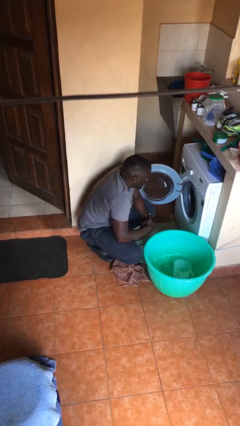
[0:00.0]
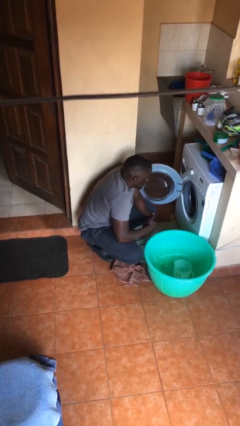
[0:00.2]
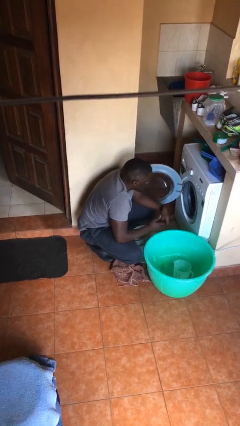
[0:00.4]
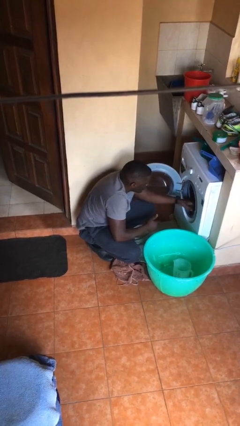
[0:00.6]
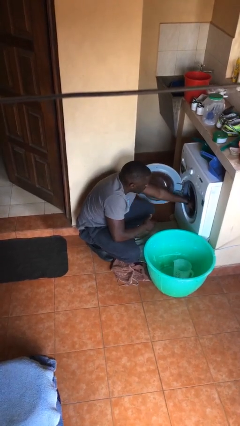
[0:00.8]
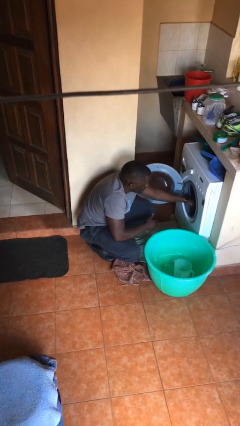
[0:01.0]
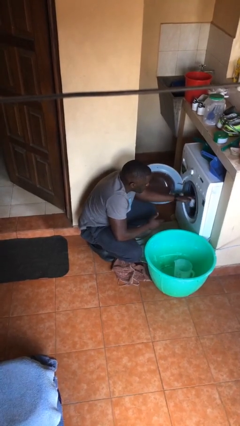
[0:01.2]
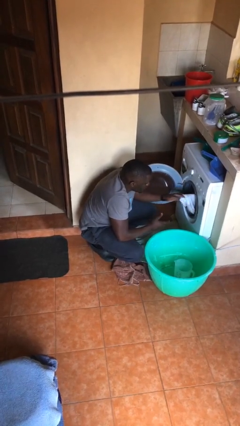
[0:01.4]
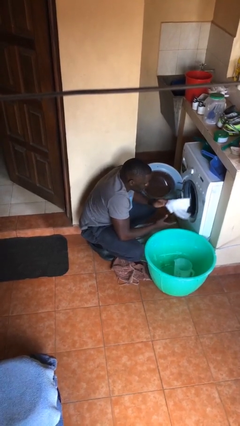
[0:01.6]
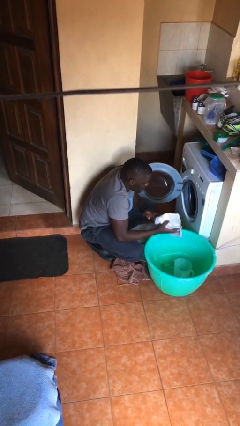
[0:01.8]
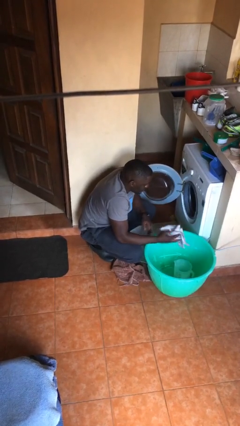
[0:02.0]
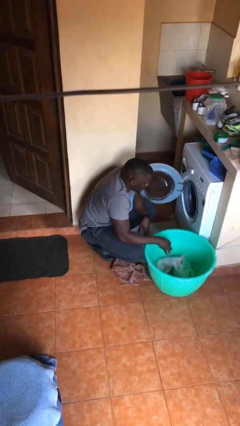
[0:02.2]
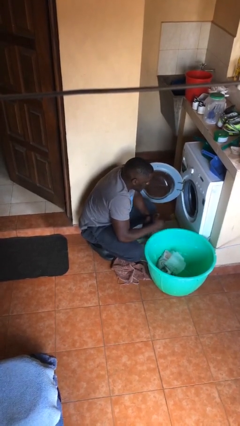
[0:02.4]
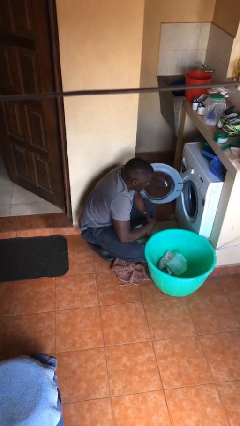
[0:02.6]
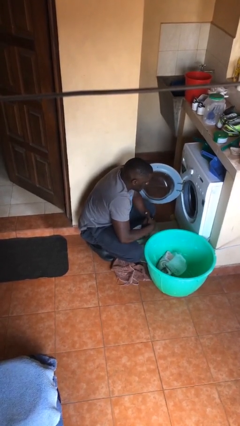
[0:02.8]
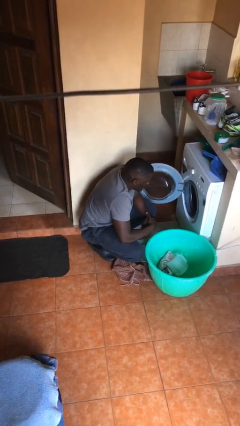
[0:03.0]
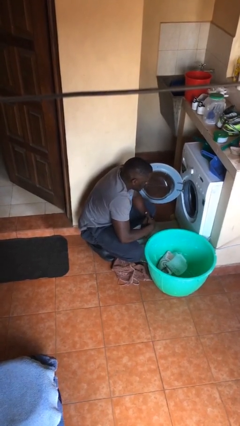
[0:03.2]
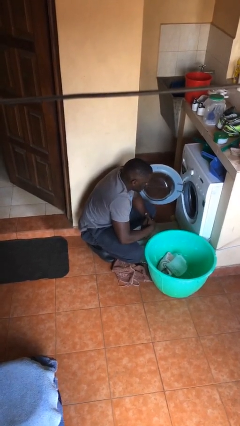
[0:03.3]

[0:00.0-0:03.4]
person unloads clotheswasher

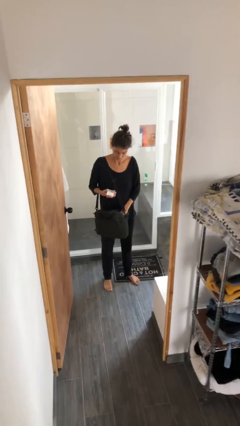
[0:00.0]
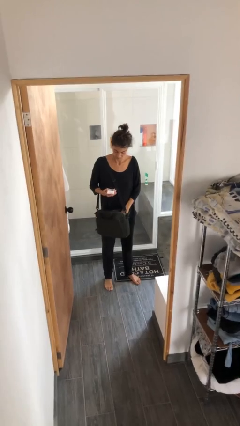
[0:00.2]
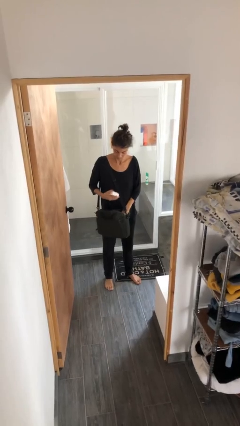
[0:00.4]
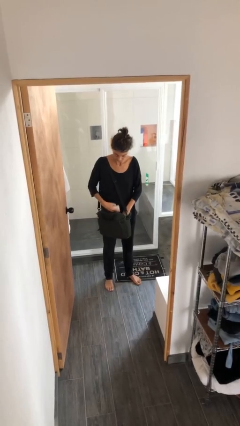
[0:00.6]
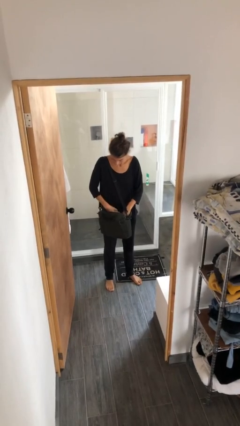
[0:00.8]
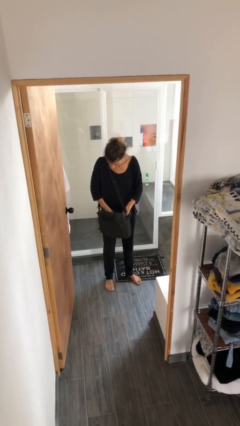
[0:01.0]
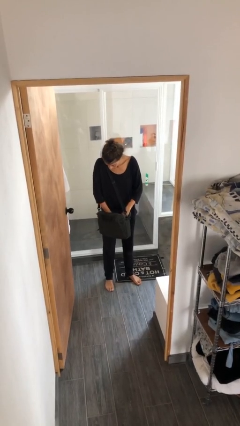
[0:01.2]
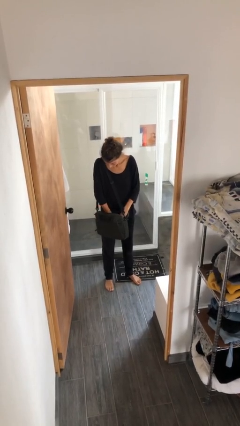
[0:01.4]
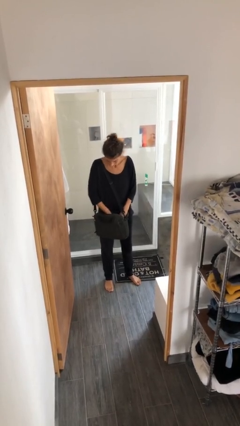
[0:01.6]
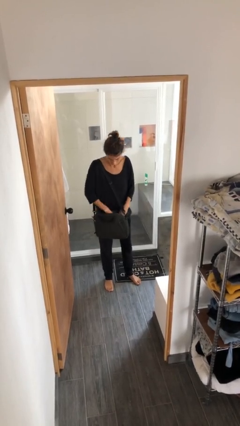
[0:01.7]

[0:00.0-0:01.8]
person puts object into purse

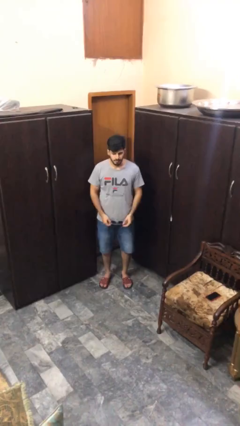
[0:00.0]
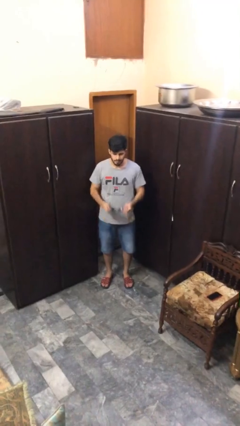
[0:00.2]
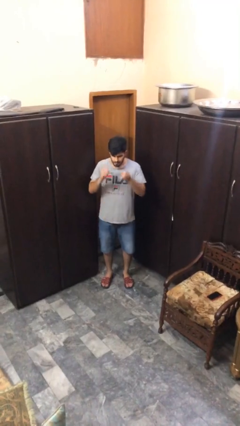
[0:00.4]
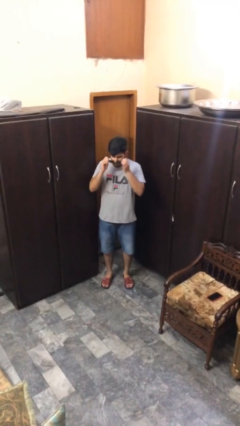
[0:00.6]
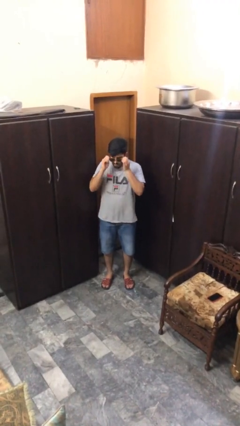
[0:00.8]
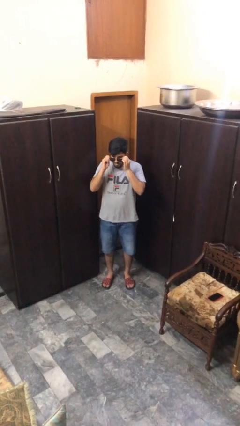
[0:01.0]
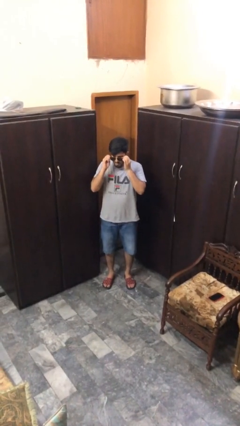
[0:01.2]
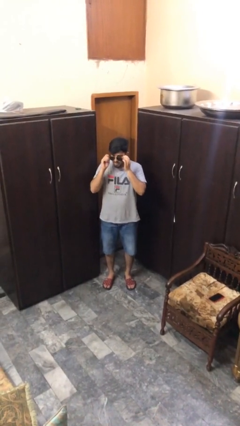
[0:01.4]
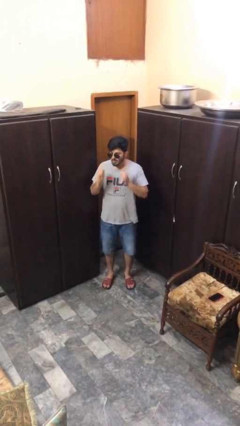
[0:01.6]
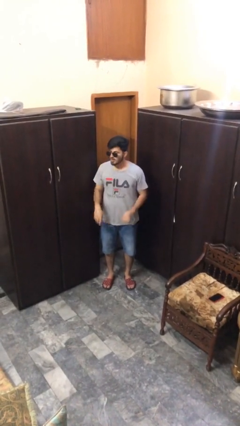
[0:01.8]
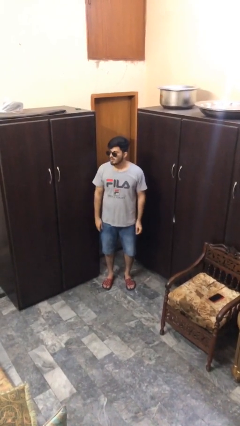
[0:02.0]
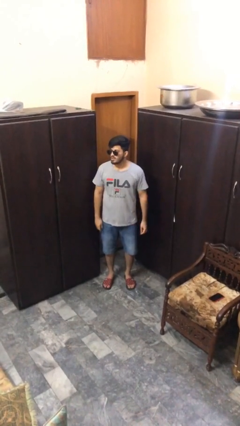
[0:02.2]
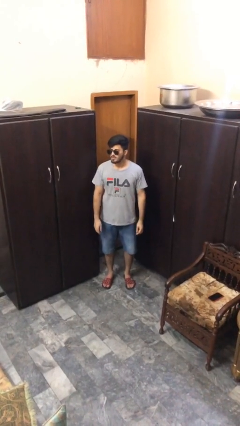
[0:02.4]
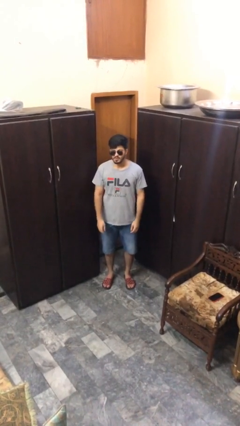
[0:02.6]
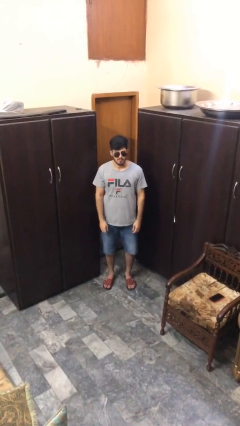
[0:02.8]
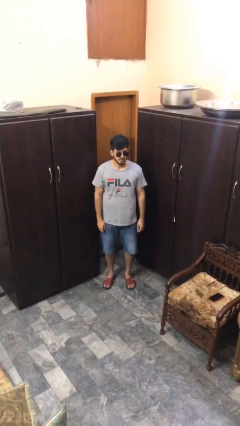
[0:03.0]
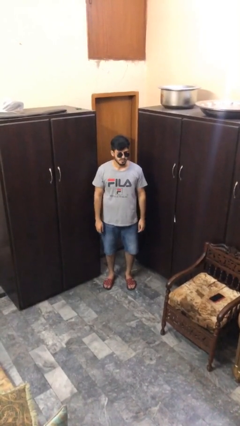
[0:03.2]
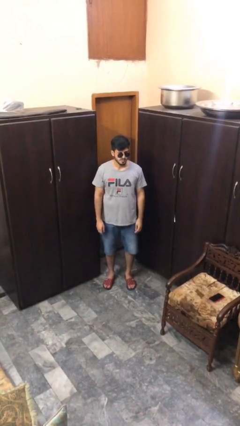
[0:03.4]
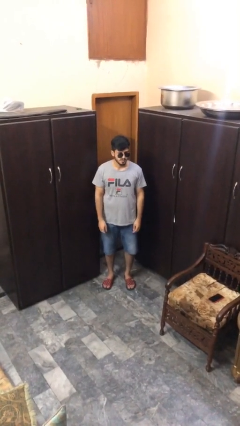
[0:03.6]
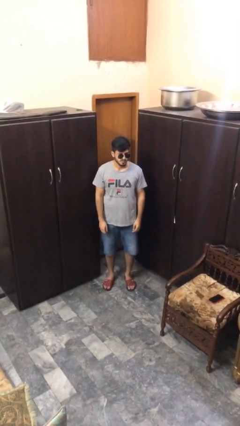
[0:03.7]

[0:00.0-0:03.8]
person puts on sunglasses

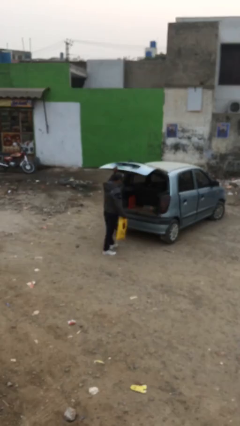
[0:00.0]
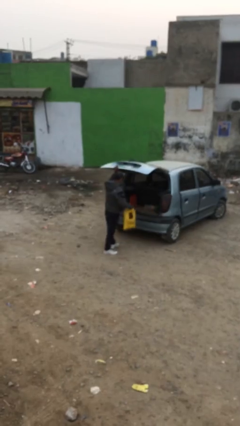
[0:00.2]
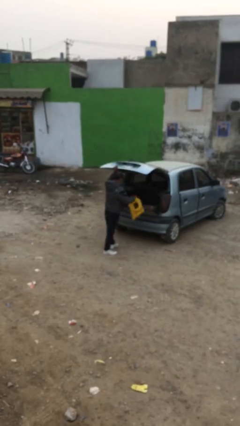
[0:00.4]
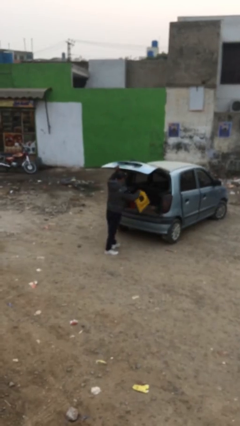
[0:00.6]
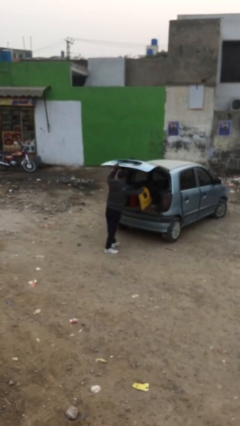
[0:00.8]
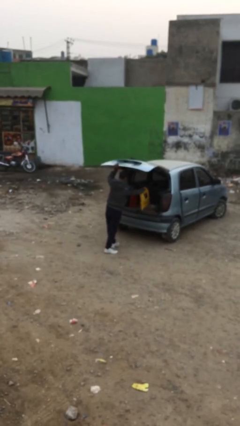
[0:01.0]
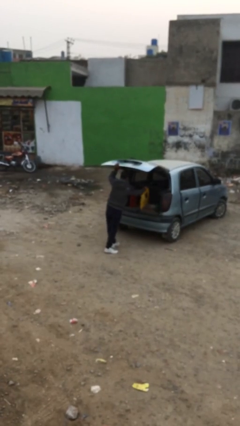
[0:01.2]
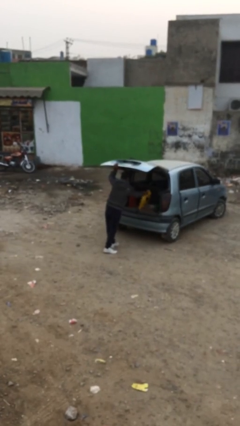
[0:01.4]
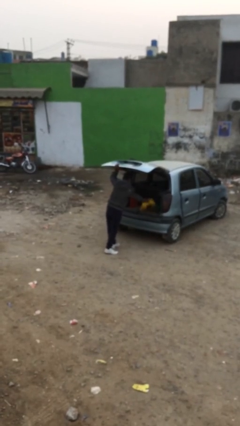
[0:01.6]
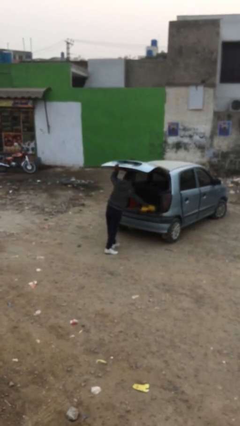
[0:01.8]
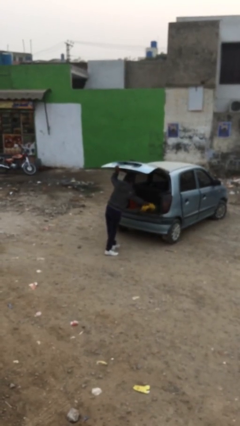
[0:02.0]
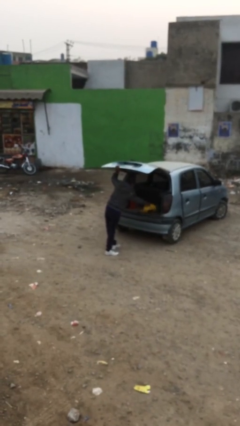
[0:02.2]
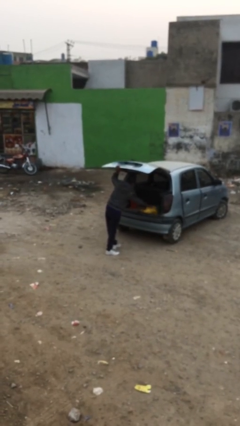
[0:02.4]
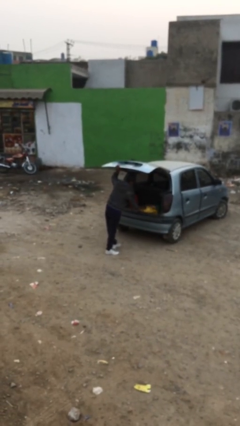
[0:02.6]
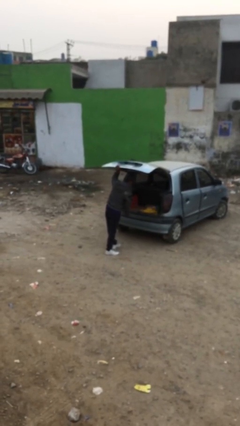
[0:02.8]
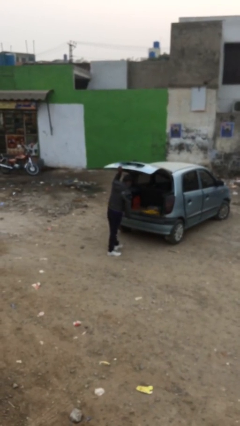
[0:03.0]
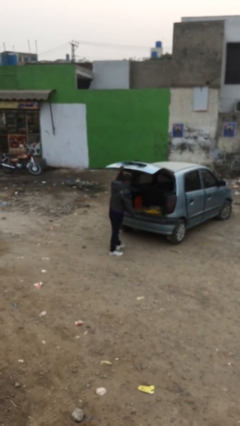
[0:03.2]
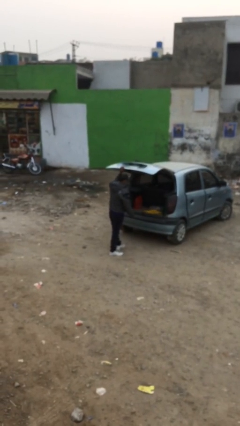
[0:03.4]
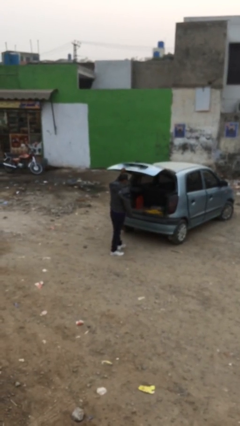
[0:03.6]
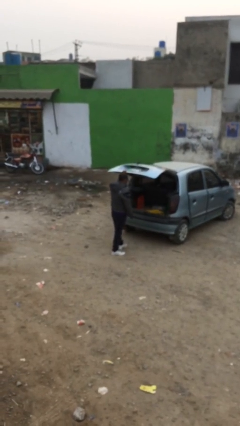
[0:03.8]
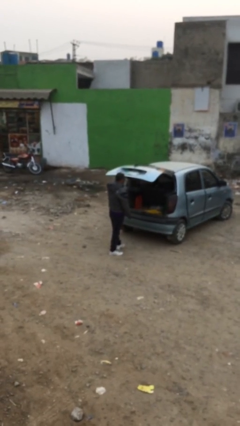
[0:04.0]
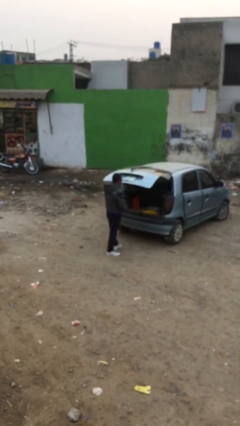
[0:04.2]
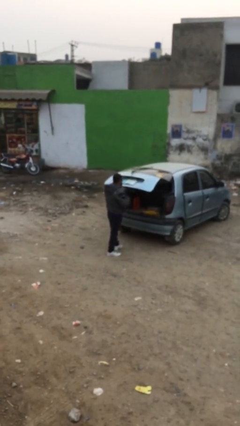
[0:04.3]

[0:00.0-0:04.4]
person loads car

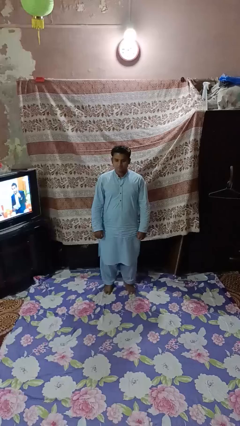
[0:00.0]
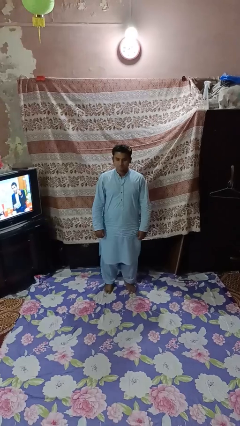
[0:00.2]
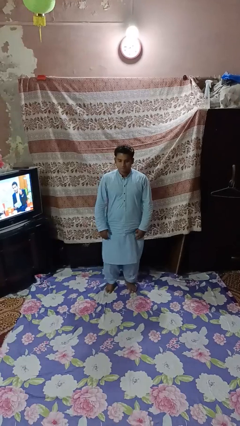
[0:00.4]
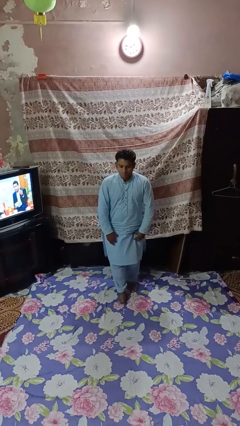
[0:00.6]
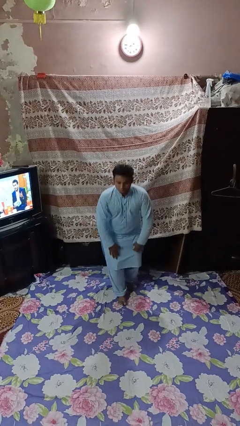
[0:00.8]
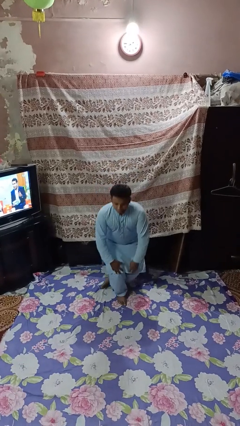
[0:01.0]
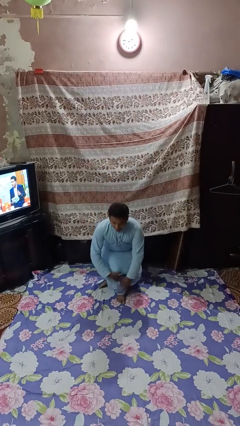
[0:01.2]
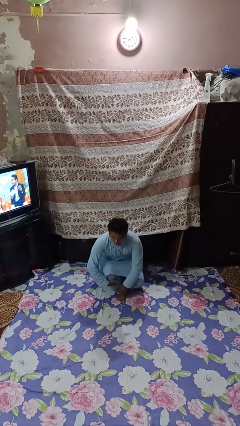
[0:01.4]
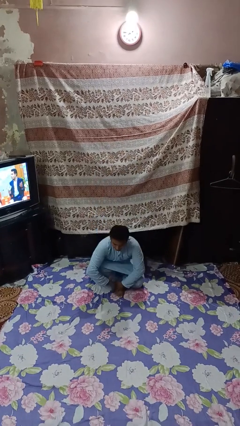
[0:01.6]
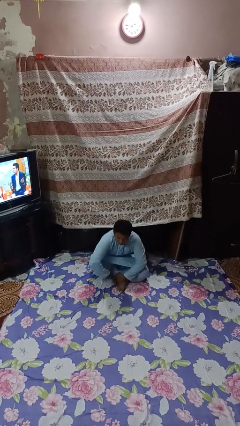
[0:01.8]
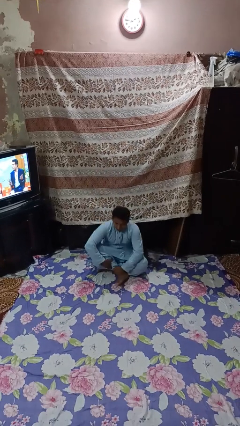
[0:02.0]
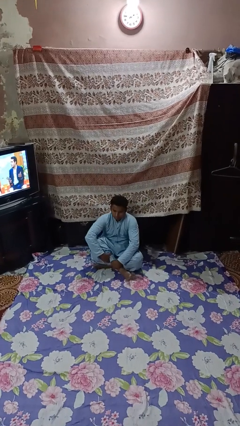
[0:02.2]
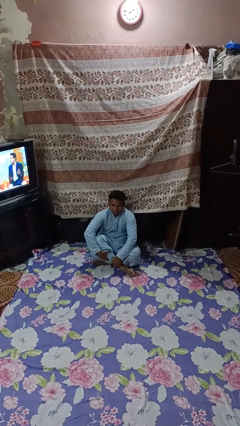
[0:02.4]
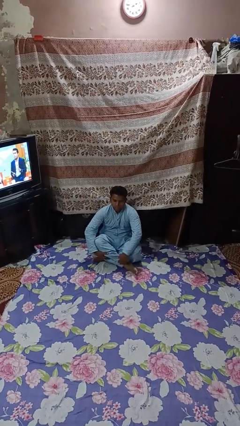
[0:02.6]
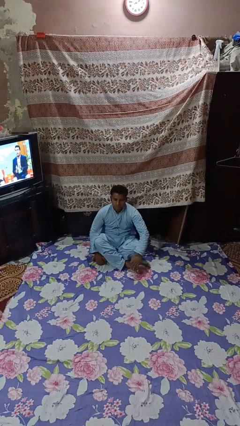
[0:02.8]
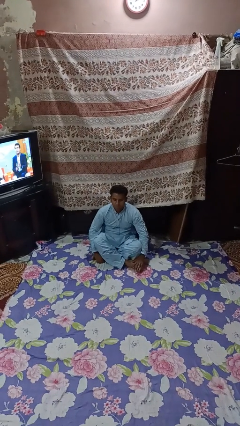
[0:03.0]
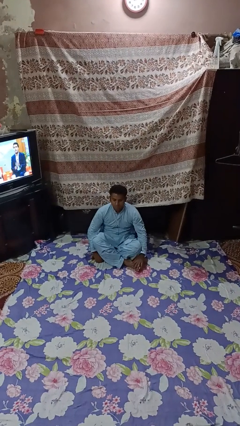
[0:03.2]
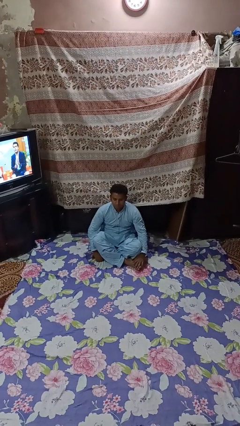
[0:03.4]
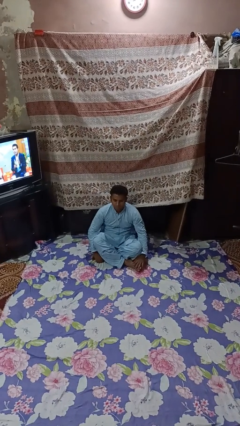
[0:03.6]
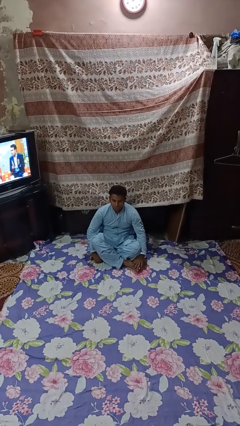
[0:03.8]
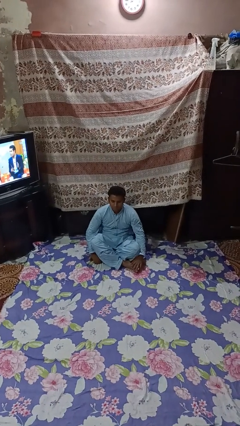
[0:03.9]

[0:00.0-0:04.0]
person sits crisscross
